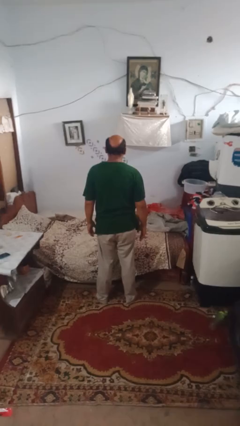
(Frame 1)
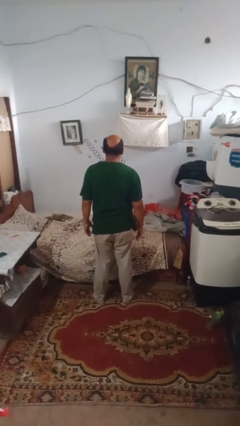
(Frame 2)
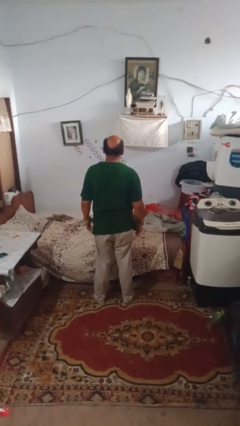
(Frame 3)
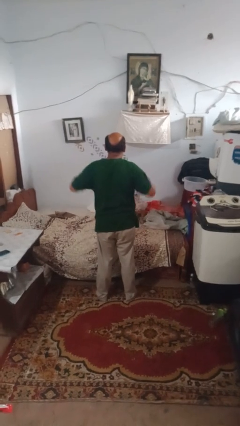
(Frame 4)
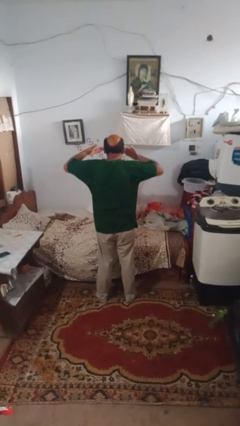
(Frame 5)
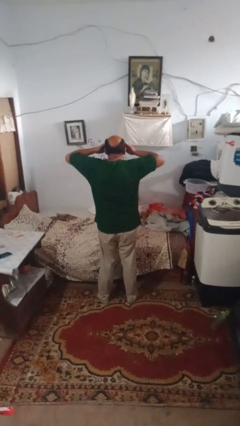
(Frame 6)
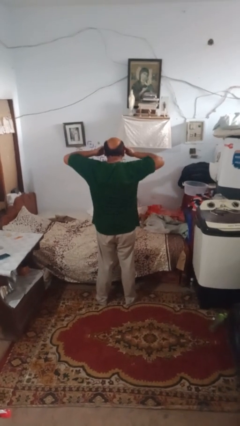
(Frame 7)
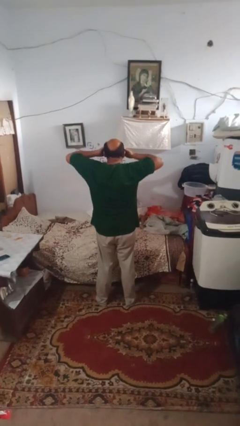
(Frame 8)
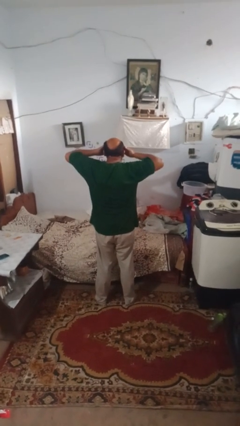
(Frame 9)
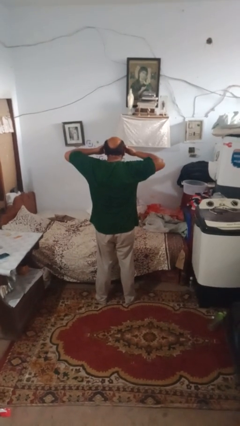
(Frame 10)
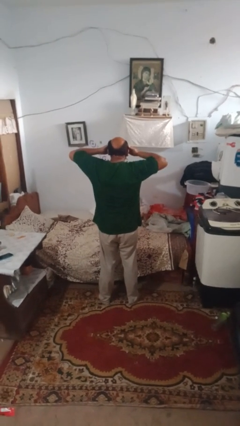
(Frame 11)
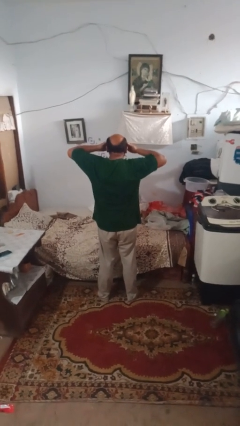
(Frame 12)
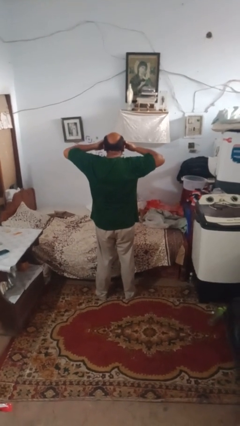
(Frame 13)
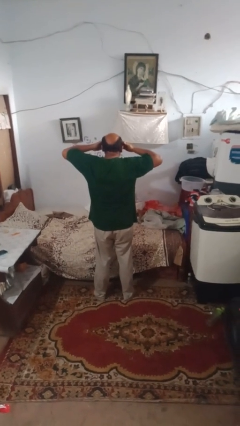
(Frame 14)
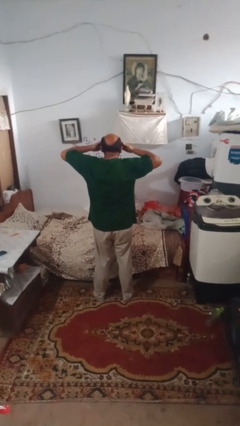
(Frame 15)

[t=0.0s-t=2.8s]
person rubs eyes

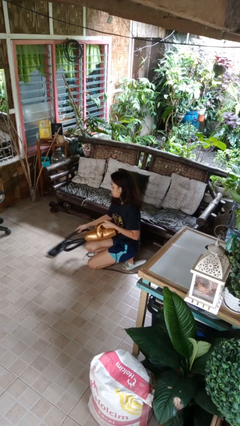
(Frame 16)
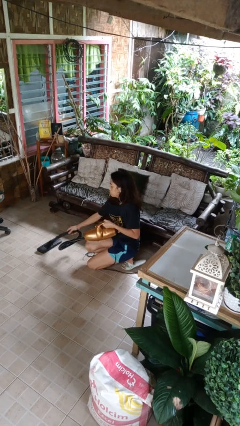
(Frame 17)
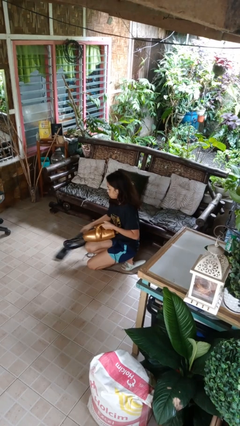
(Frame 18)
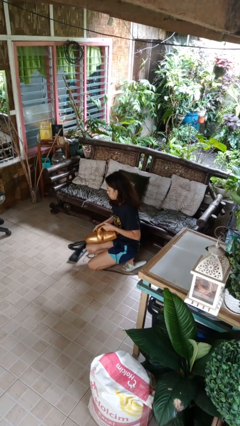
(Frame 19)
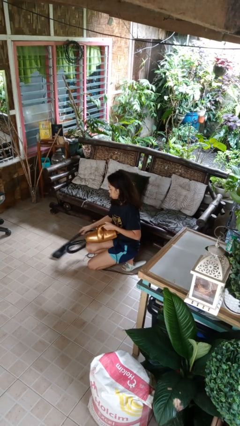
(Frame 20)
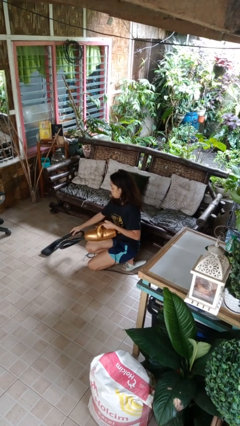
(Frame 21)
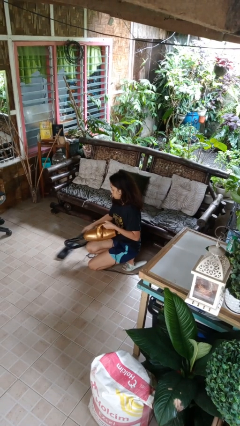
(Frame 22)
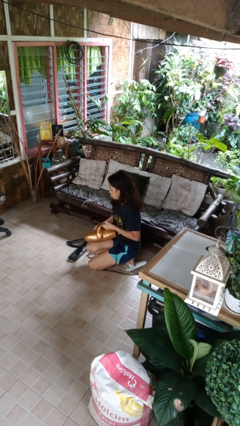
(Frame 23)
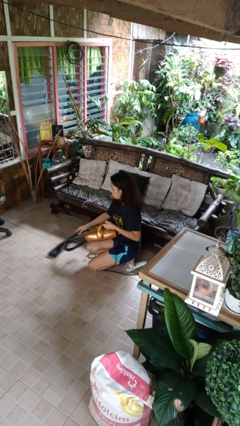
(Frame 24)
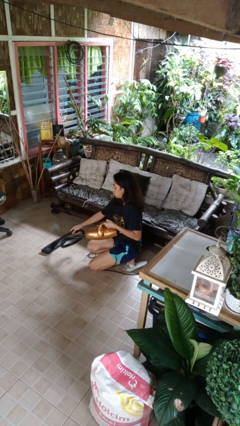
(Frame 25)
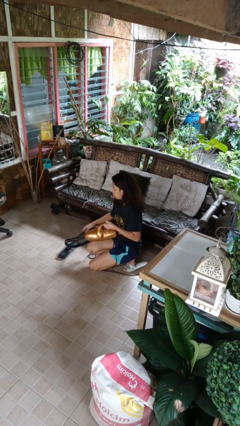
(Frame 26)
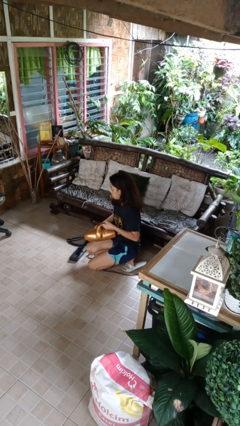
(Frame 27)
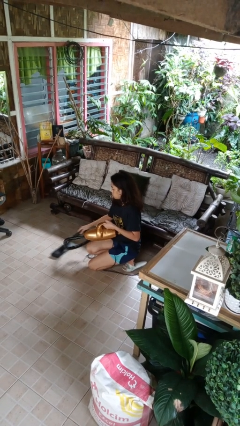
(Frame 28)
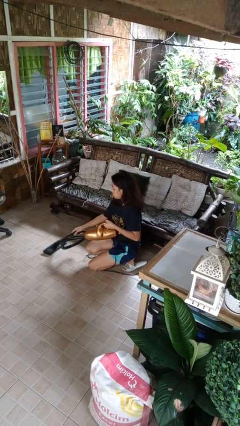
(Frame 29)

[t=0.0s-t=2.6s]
person vacuums carpet

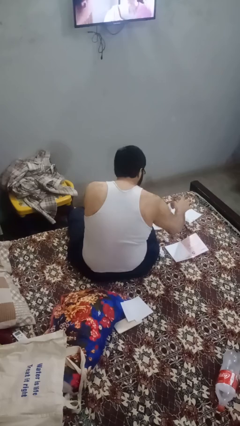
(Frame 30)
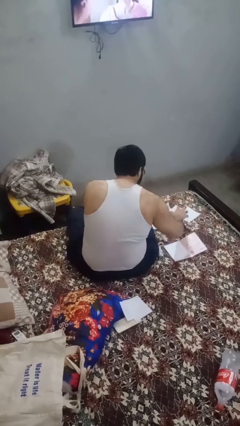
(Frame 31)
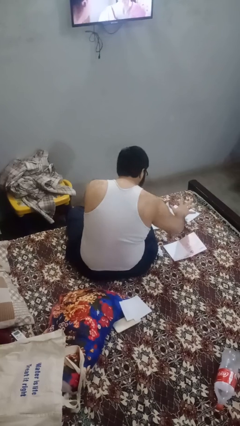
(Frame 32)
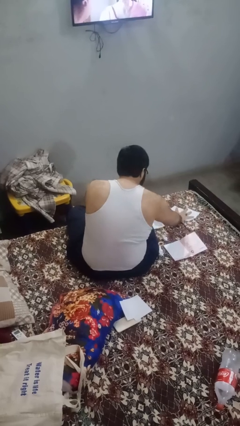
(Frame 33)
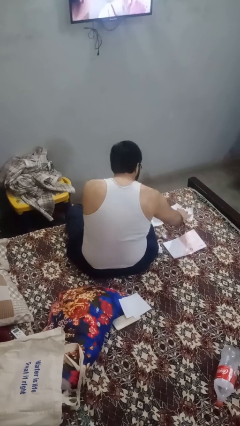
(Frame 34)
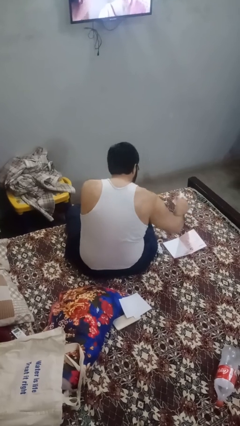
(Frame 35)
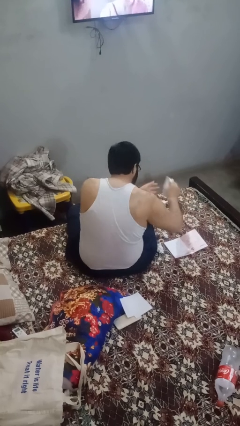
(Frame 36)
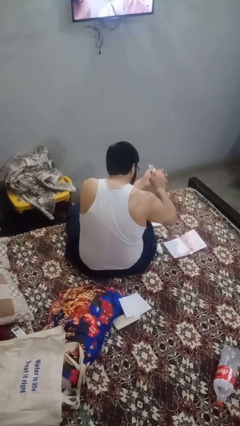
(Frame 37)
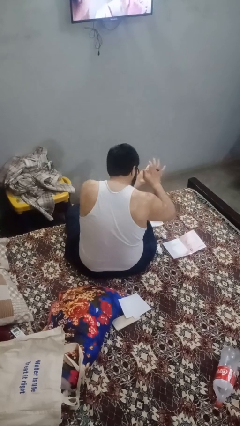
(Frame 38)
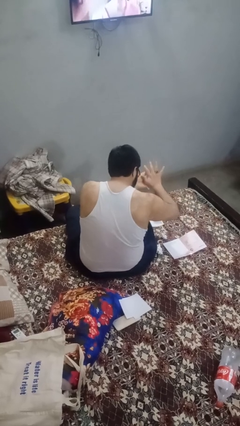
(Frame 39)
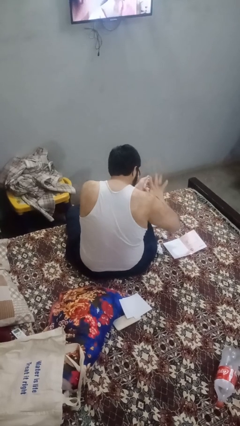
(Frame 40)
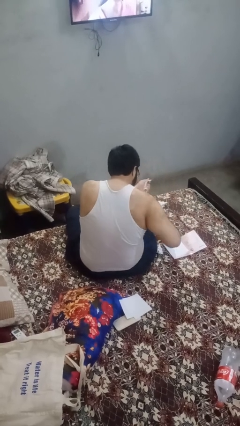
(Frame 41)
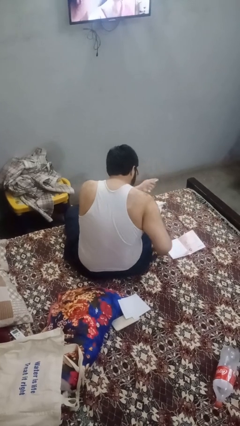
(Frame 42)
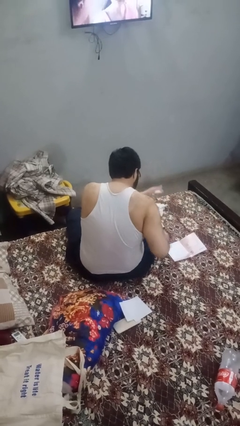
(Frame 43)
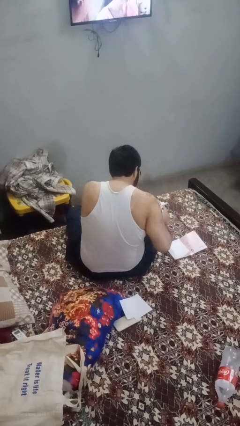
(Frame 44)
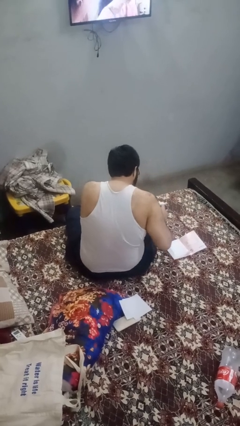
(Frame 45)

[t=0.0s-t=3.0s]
person crumples paper

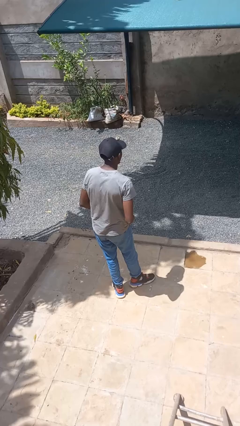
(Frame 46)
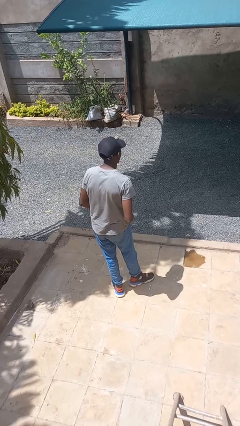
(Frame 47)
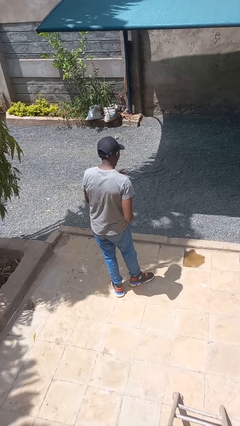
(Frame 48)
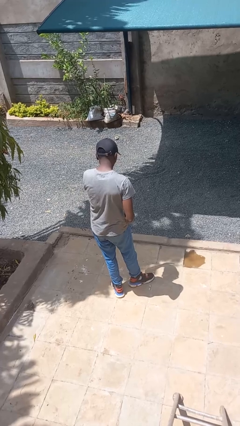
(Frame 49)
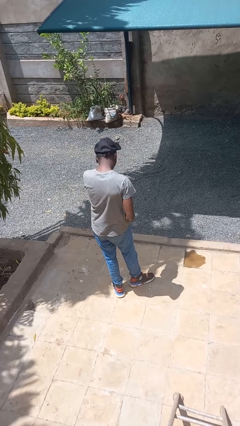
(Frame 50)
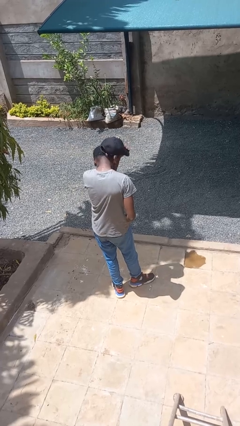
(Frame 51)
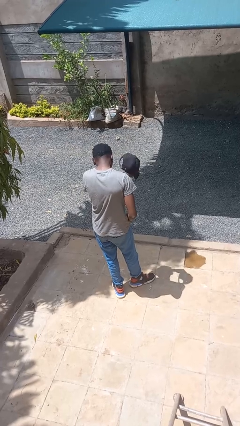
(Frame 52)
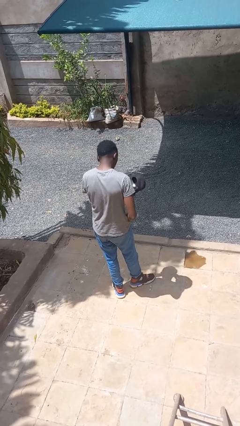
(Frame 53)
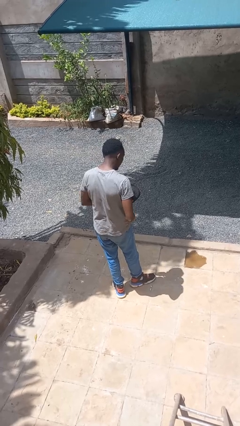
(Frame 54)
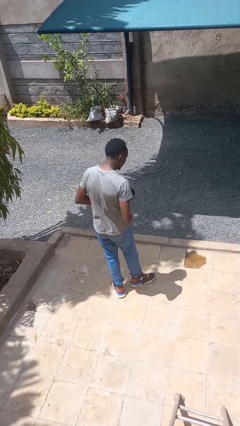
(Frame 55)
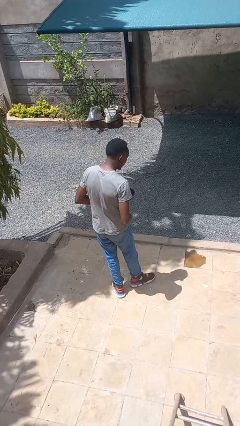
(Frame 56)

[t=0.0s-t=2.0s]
person takes off hat

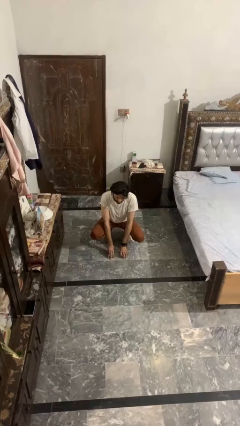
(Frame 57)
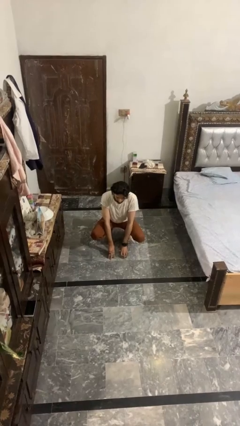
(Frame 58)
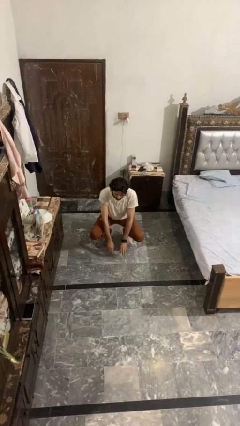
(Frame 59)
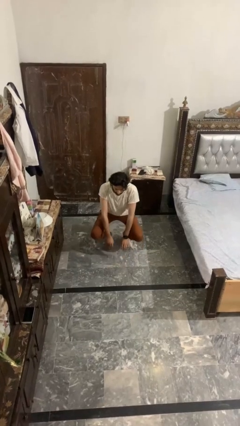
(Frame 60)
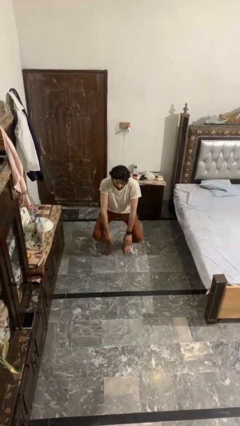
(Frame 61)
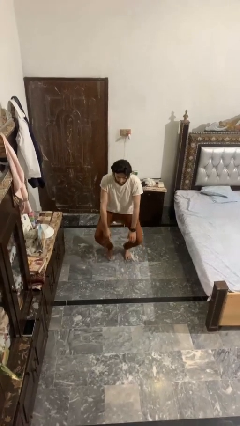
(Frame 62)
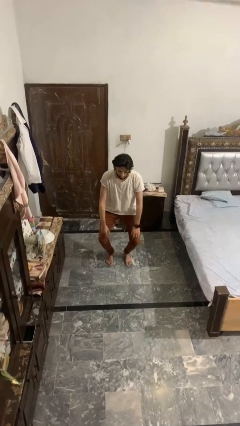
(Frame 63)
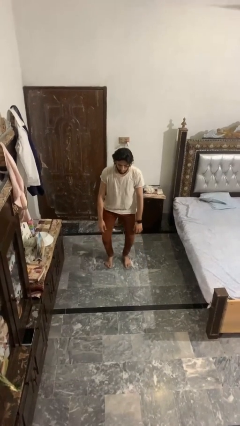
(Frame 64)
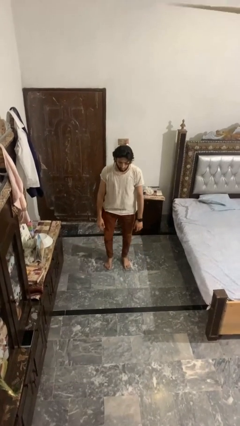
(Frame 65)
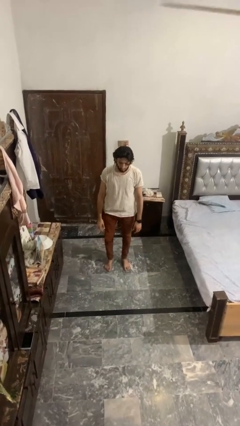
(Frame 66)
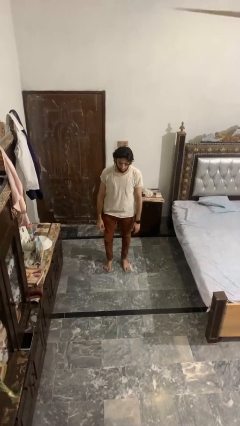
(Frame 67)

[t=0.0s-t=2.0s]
person stands up

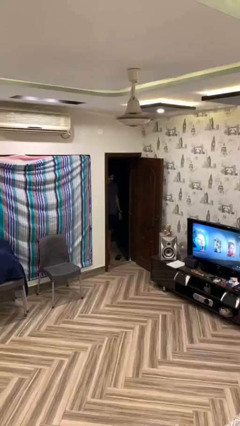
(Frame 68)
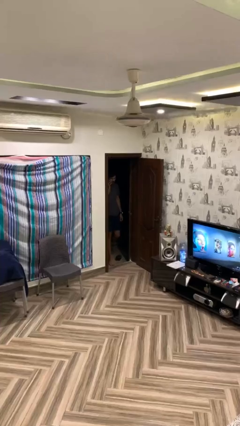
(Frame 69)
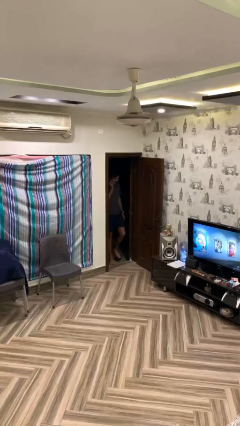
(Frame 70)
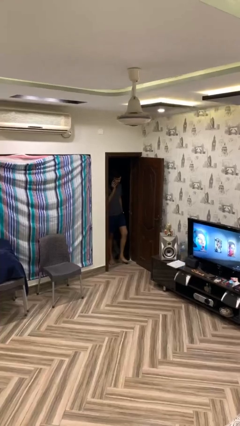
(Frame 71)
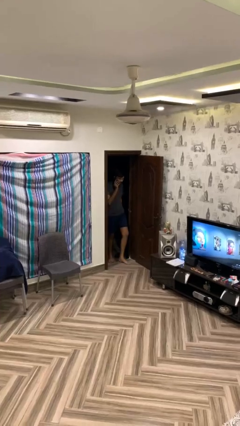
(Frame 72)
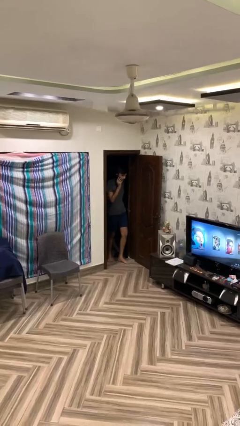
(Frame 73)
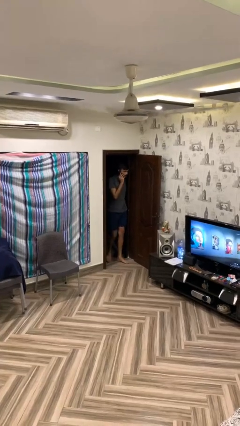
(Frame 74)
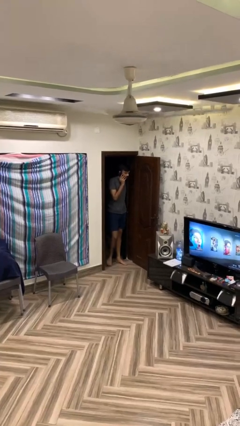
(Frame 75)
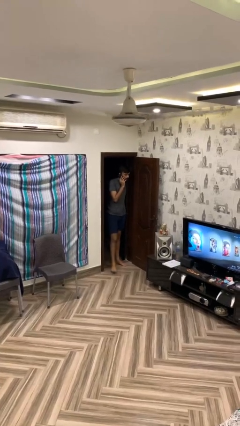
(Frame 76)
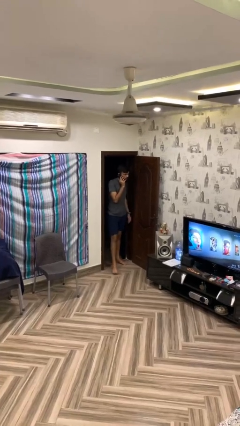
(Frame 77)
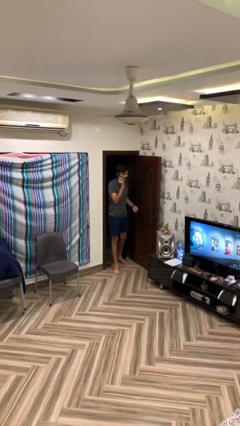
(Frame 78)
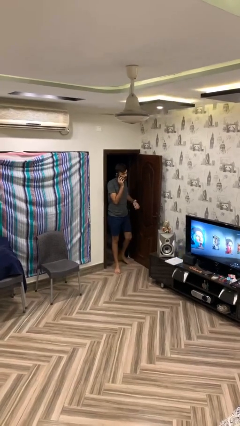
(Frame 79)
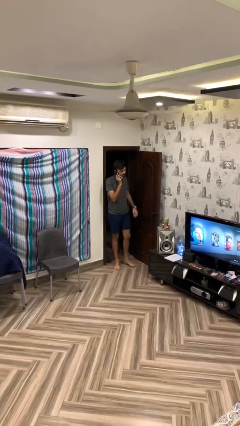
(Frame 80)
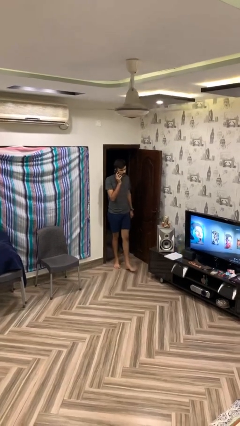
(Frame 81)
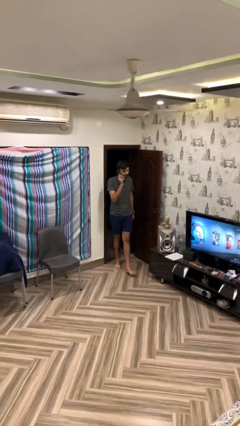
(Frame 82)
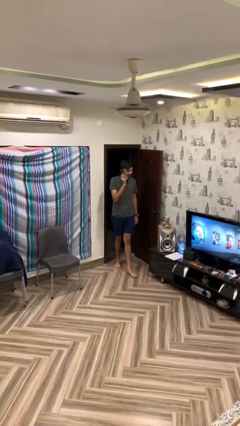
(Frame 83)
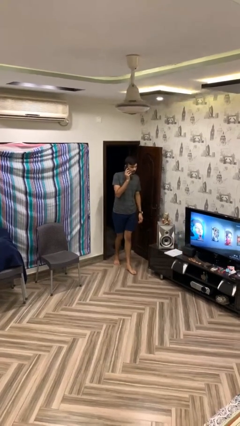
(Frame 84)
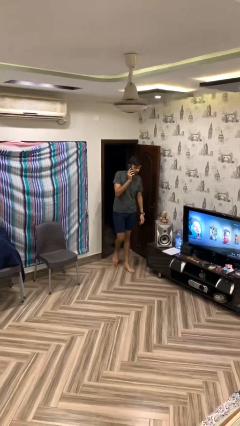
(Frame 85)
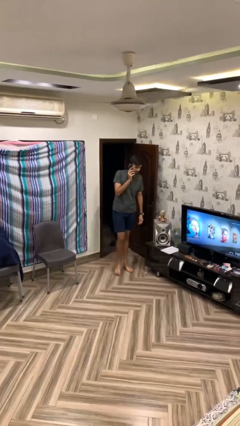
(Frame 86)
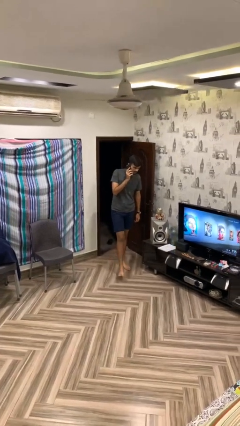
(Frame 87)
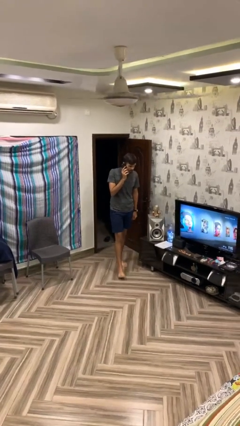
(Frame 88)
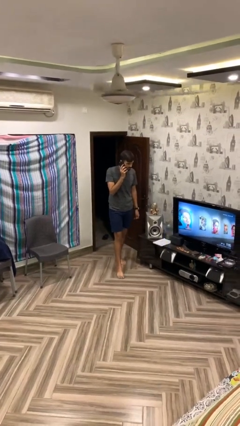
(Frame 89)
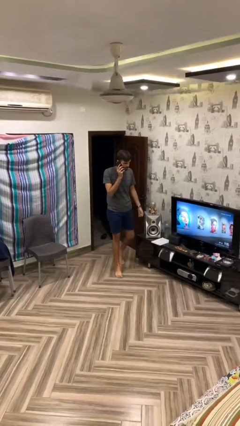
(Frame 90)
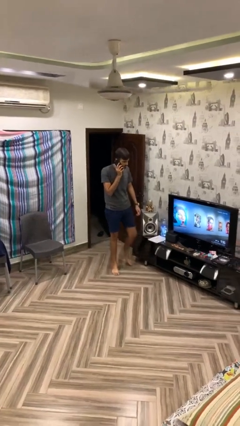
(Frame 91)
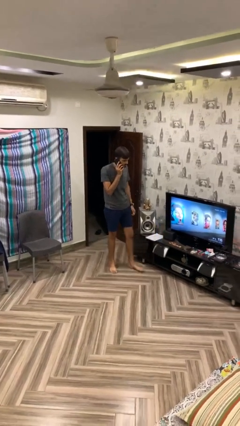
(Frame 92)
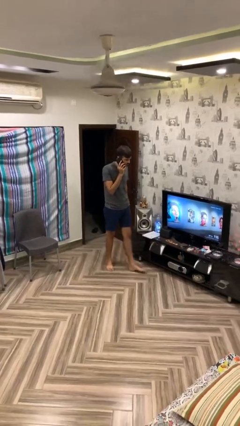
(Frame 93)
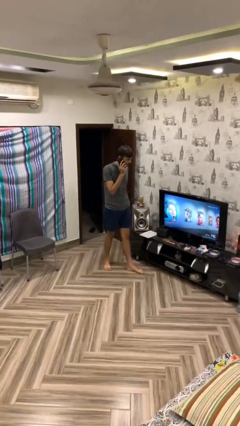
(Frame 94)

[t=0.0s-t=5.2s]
person enters scene through structure

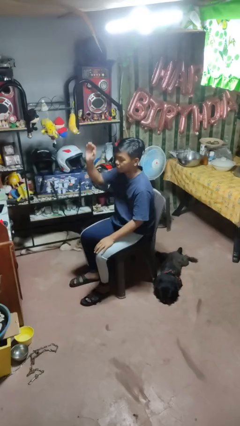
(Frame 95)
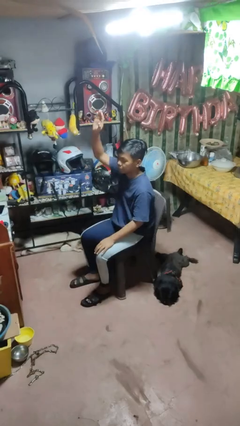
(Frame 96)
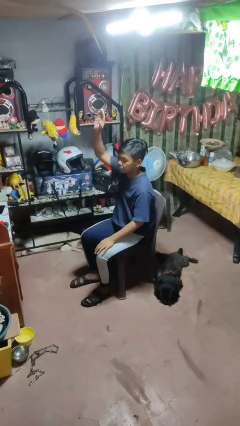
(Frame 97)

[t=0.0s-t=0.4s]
person gestures raise hand
